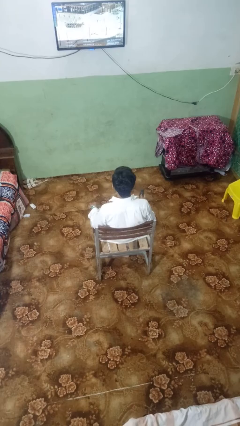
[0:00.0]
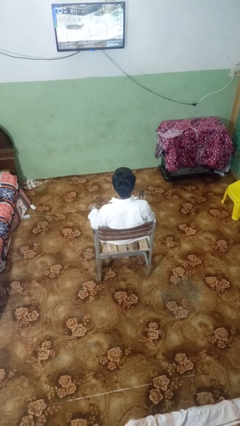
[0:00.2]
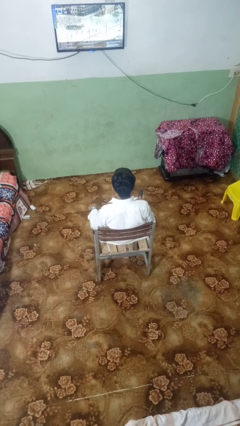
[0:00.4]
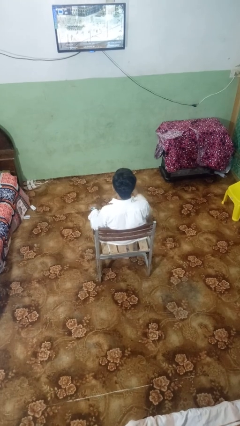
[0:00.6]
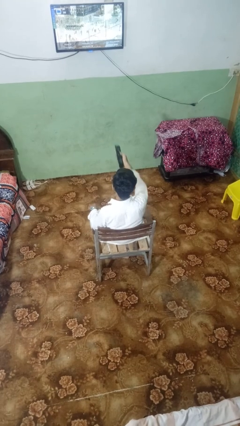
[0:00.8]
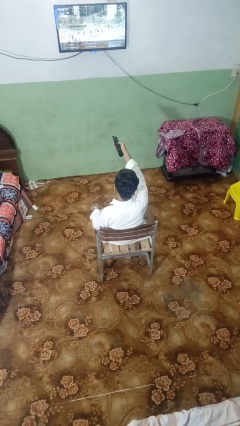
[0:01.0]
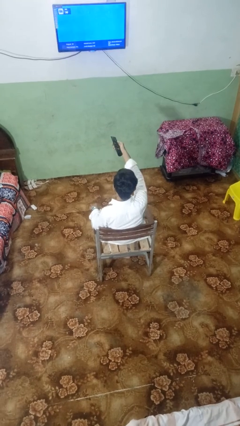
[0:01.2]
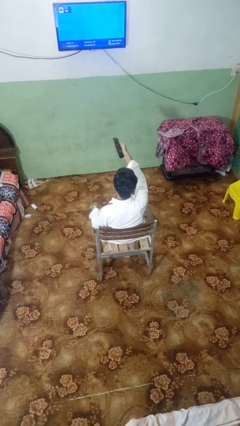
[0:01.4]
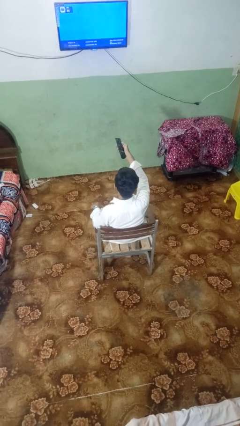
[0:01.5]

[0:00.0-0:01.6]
person uses television remote

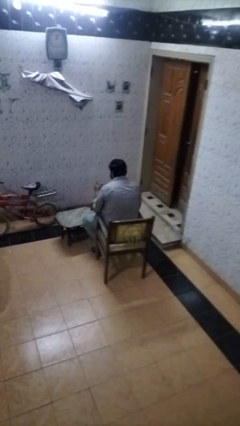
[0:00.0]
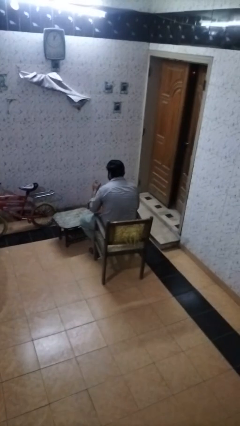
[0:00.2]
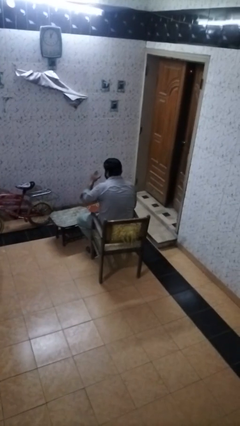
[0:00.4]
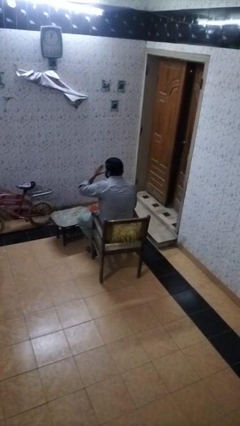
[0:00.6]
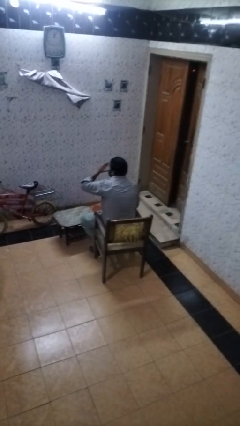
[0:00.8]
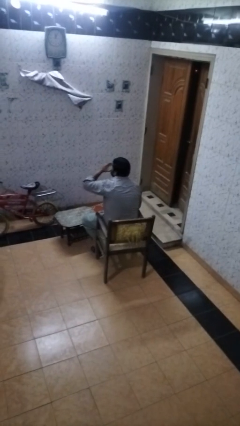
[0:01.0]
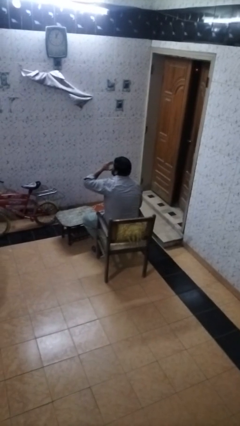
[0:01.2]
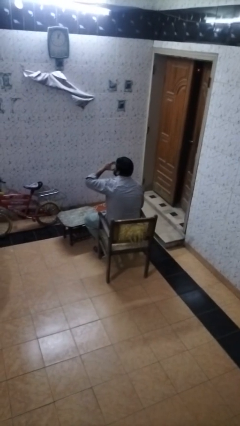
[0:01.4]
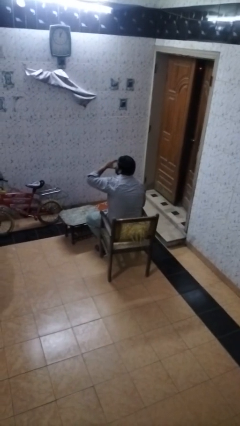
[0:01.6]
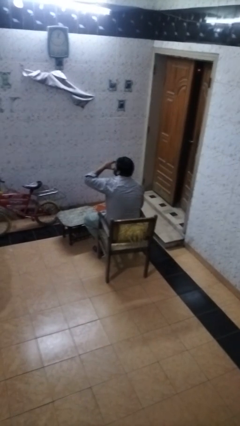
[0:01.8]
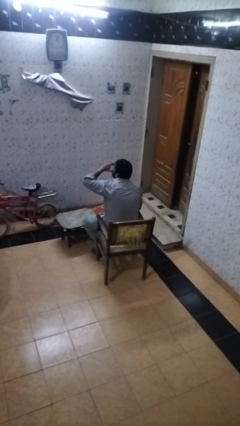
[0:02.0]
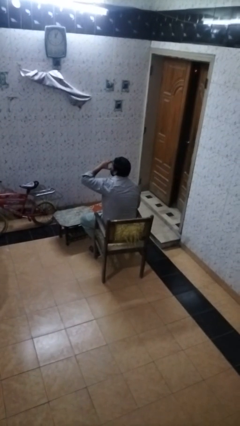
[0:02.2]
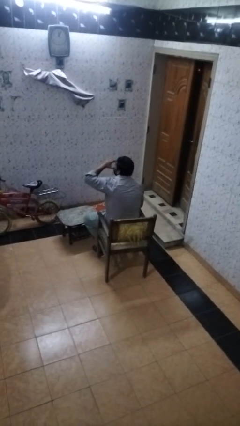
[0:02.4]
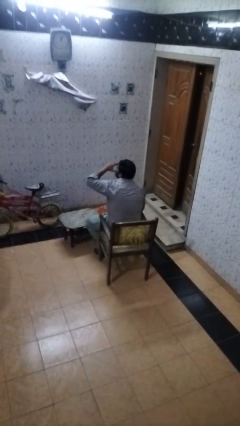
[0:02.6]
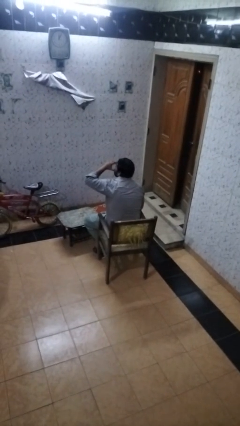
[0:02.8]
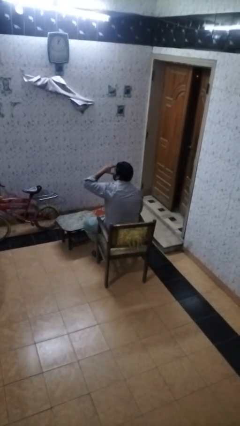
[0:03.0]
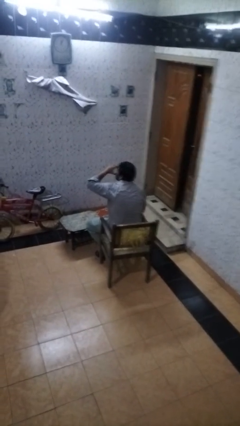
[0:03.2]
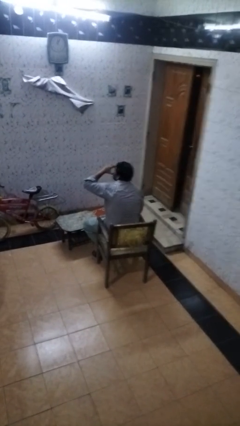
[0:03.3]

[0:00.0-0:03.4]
person drinks from shotglass

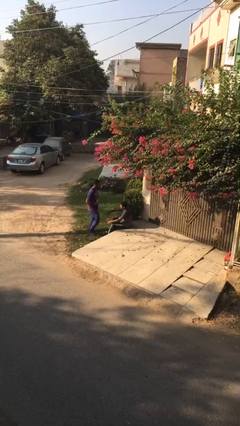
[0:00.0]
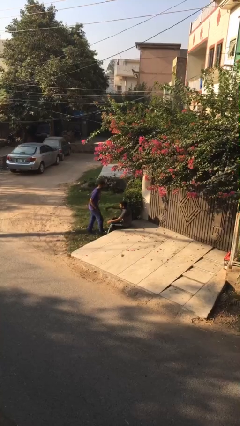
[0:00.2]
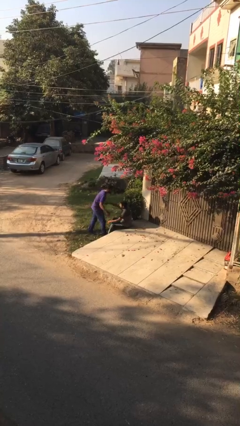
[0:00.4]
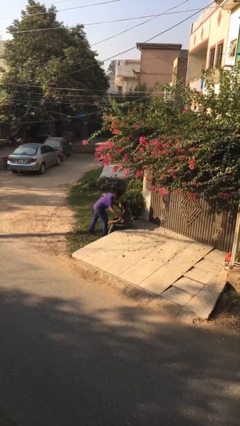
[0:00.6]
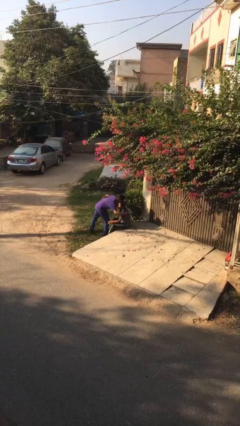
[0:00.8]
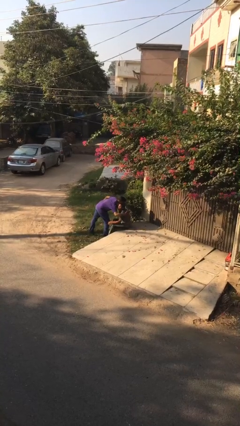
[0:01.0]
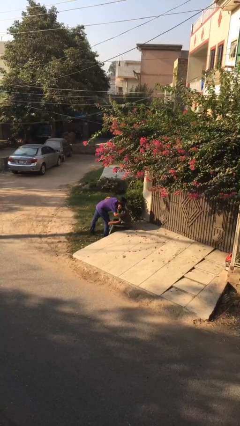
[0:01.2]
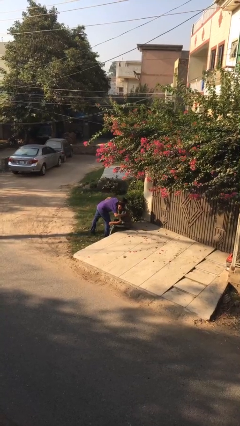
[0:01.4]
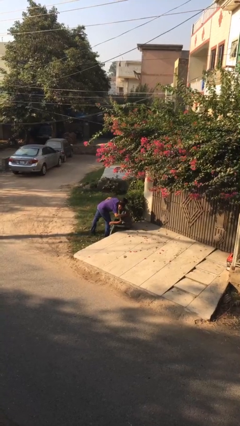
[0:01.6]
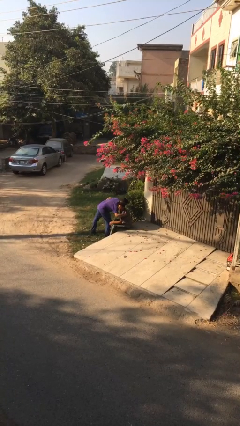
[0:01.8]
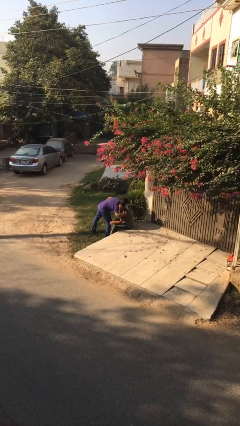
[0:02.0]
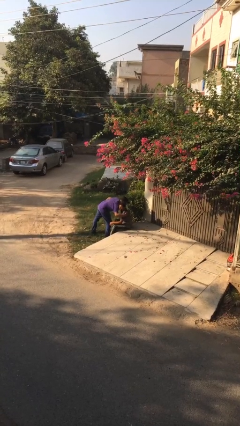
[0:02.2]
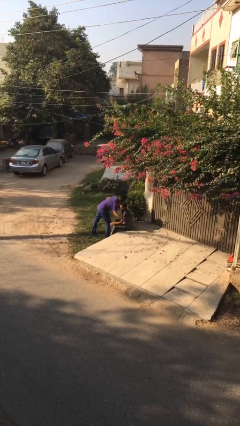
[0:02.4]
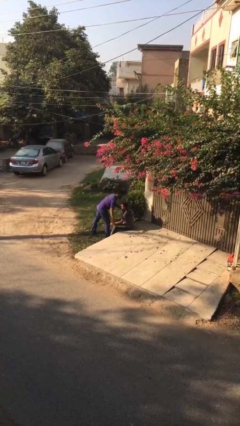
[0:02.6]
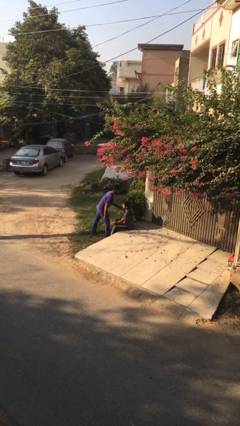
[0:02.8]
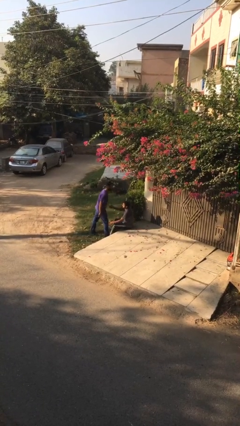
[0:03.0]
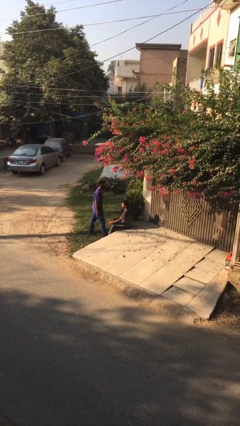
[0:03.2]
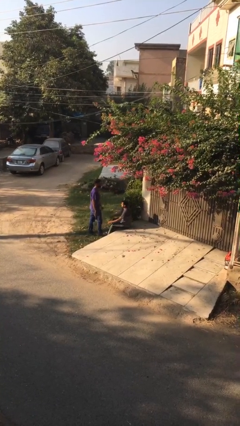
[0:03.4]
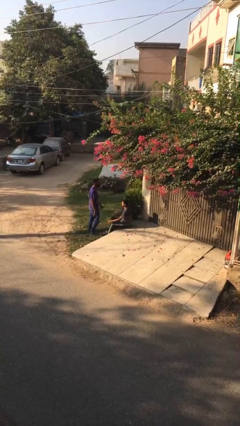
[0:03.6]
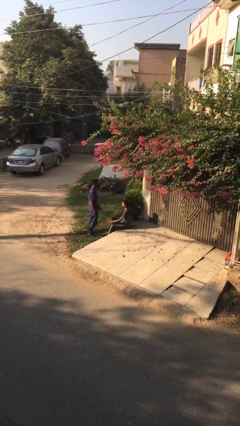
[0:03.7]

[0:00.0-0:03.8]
person embraces person

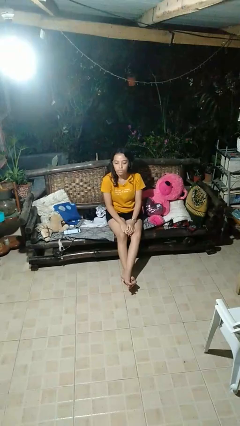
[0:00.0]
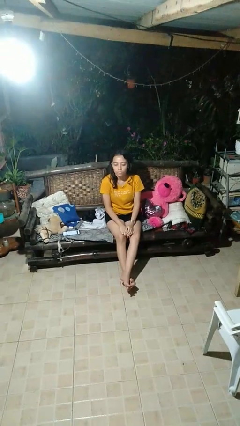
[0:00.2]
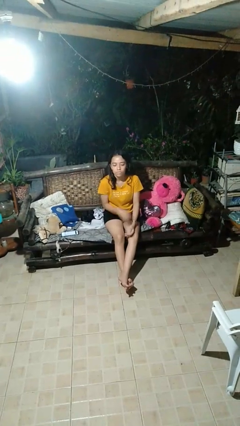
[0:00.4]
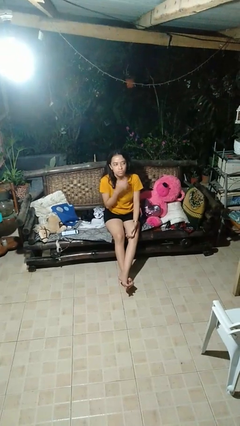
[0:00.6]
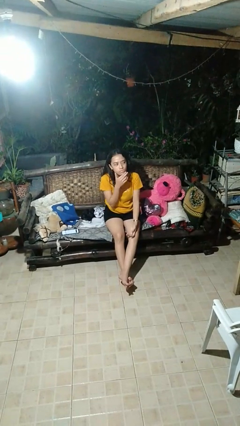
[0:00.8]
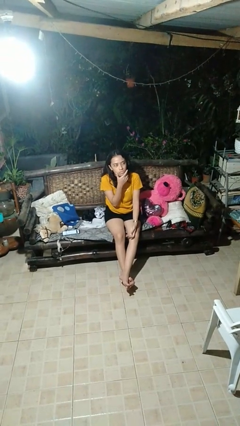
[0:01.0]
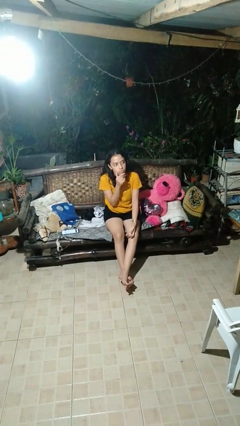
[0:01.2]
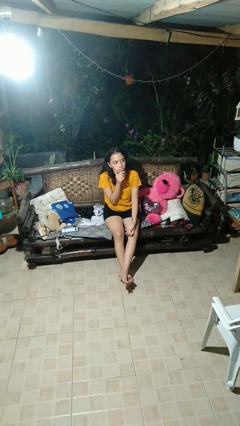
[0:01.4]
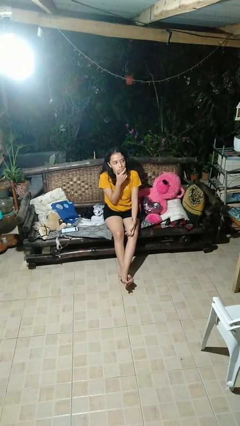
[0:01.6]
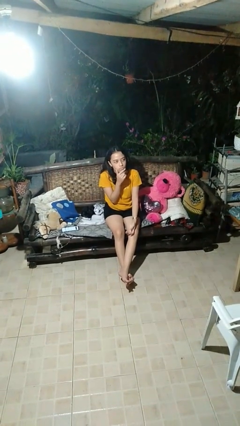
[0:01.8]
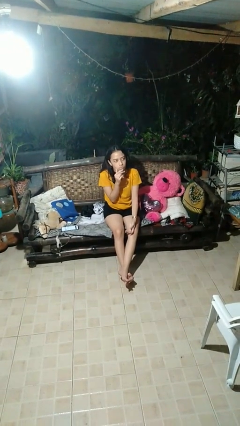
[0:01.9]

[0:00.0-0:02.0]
person strokes chin

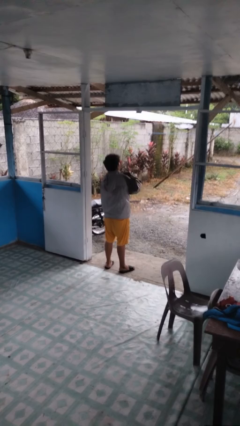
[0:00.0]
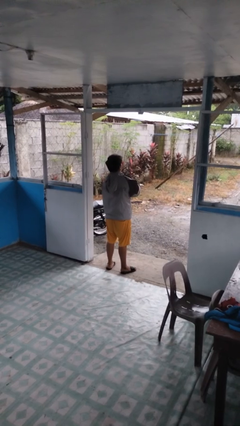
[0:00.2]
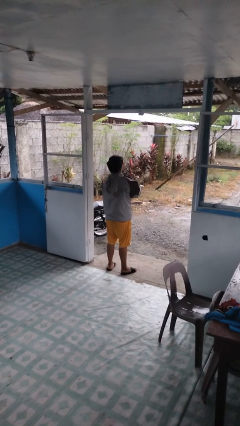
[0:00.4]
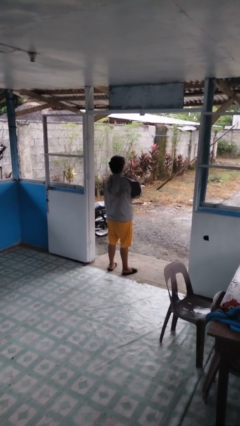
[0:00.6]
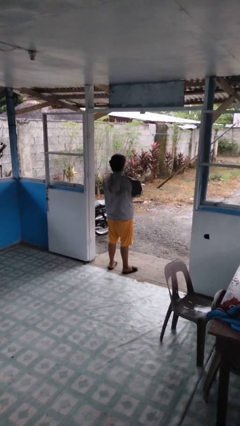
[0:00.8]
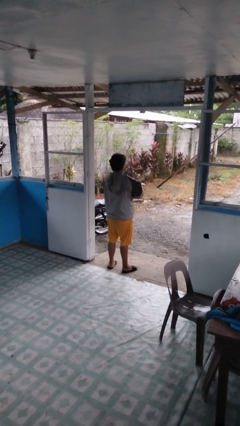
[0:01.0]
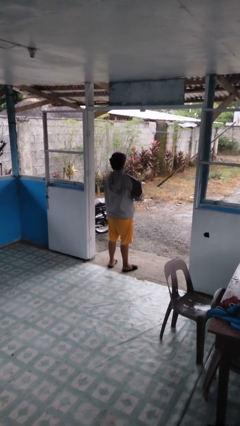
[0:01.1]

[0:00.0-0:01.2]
person unzips jacket

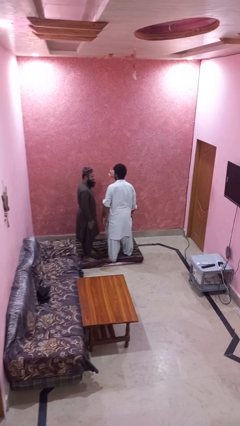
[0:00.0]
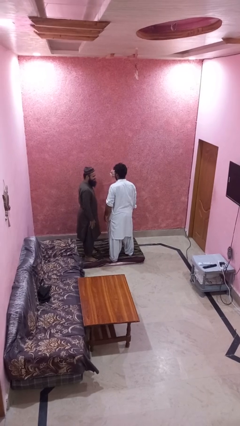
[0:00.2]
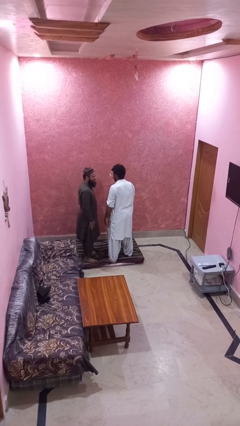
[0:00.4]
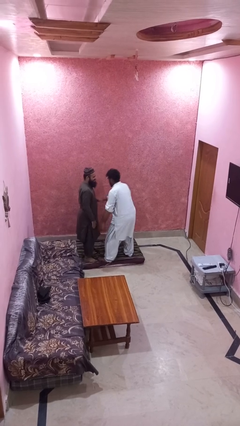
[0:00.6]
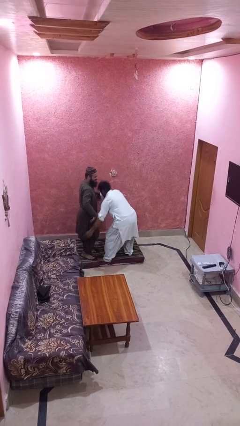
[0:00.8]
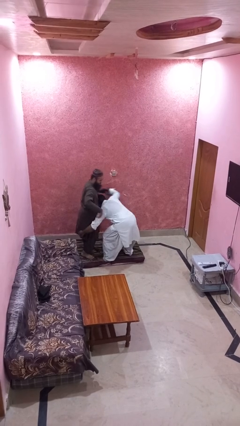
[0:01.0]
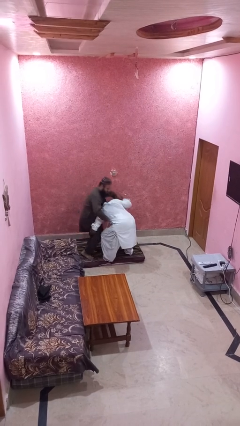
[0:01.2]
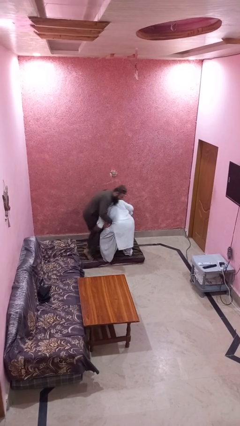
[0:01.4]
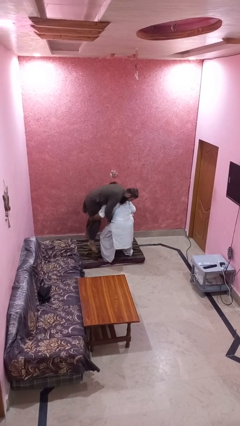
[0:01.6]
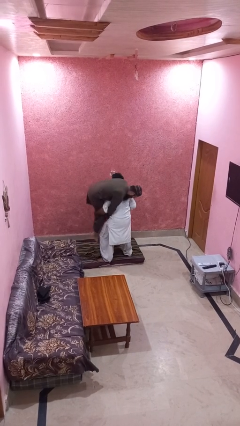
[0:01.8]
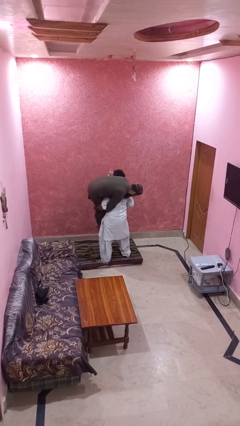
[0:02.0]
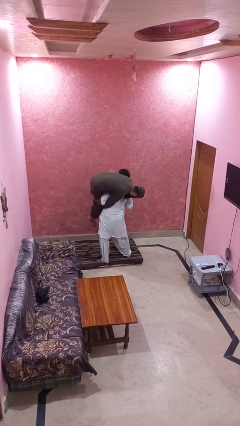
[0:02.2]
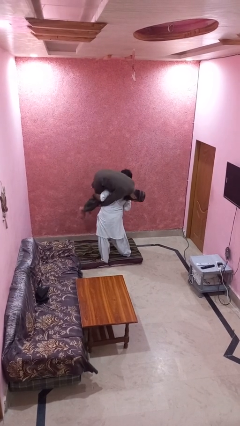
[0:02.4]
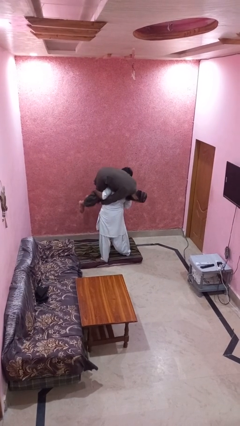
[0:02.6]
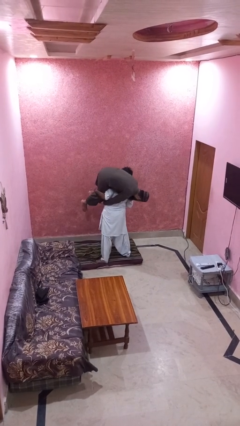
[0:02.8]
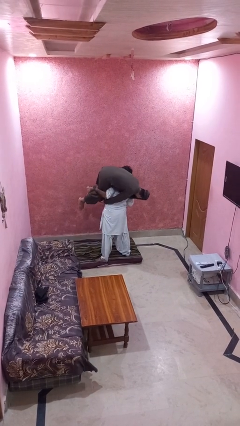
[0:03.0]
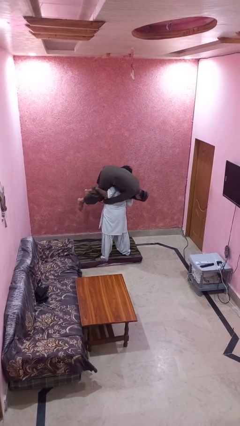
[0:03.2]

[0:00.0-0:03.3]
person carries person over shoulder

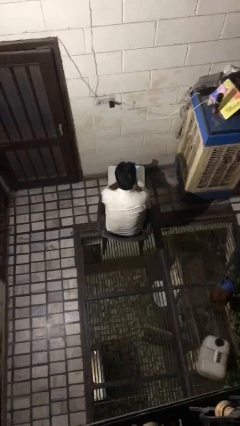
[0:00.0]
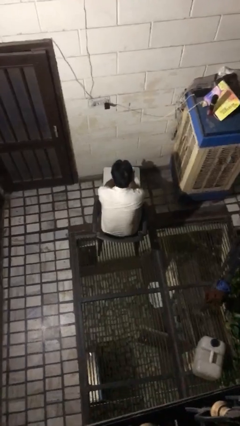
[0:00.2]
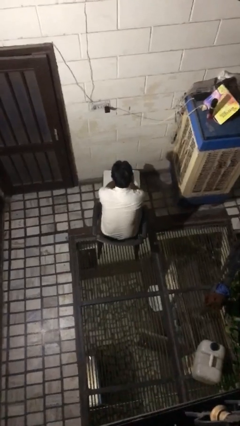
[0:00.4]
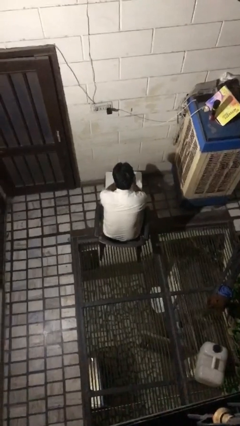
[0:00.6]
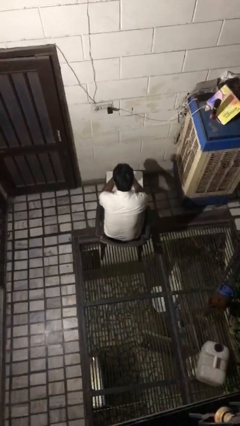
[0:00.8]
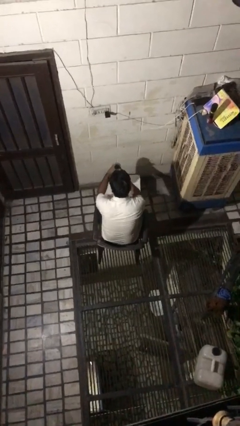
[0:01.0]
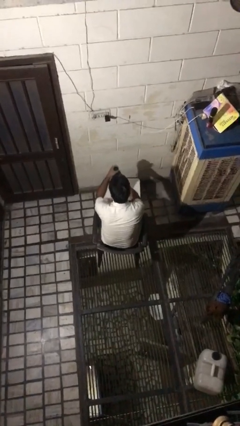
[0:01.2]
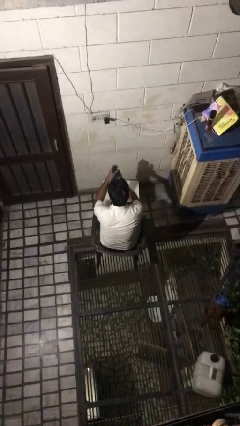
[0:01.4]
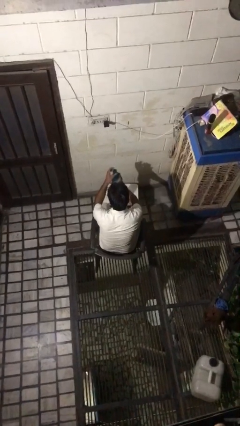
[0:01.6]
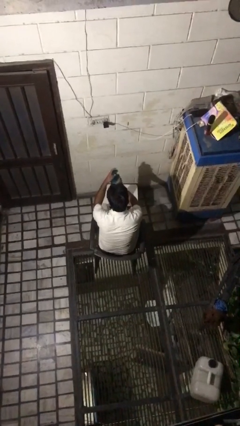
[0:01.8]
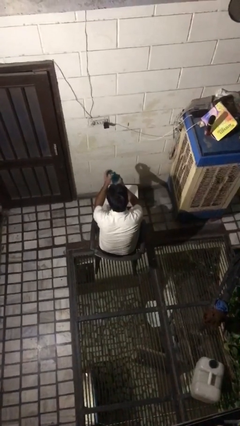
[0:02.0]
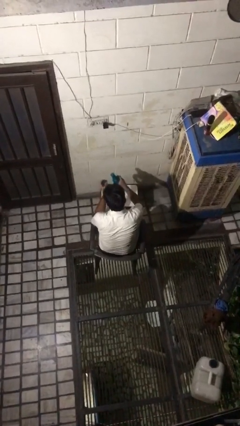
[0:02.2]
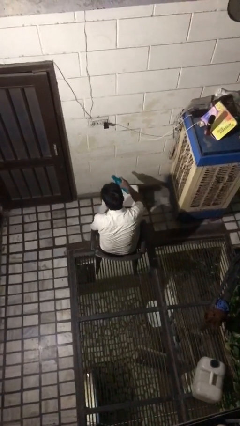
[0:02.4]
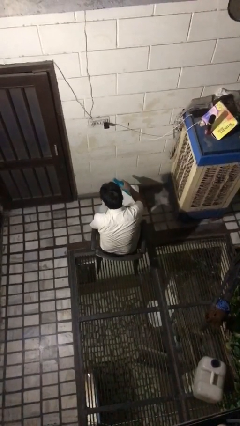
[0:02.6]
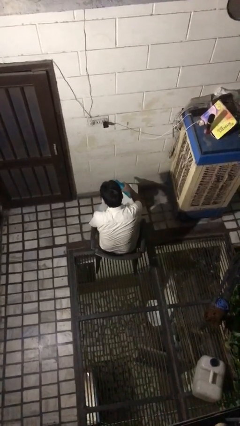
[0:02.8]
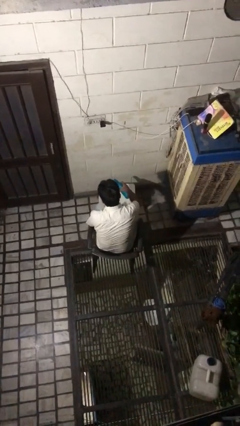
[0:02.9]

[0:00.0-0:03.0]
person unscrews lid from bottle
